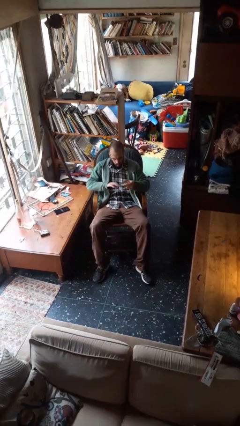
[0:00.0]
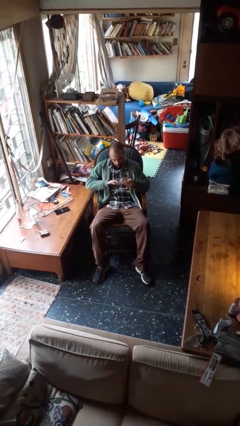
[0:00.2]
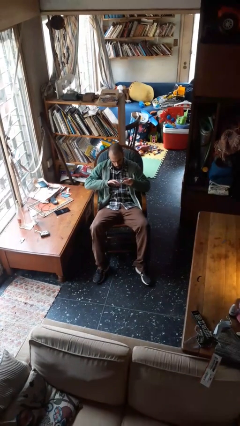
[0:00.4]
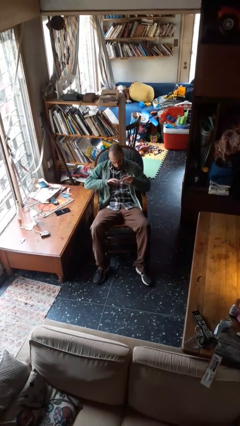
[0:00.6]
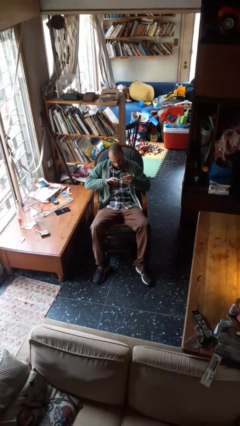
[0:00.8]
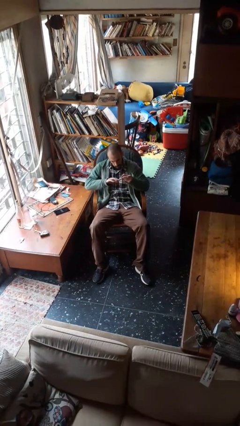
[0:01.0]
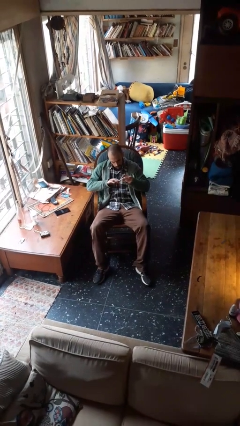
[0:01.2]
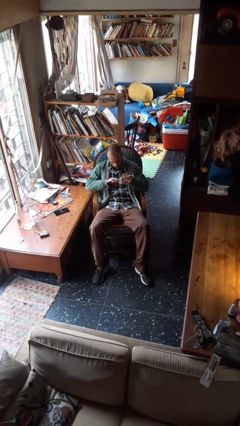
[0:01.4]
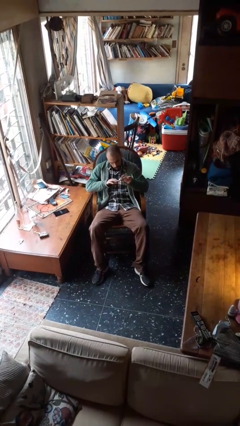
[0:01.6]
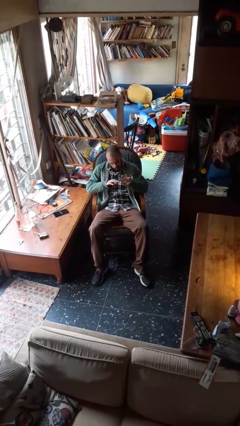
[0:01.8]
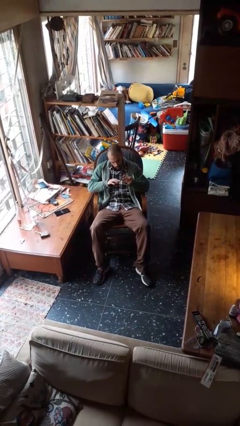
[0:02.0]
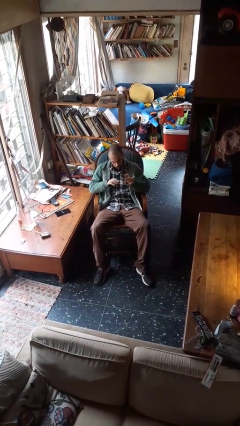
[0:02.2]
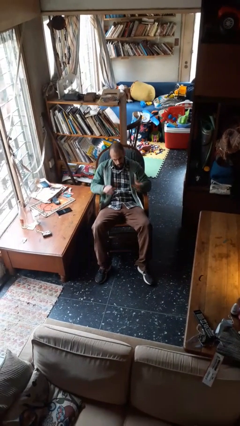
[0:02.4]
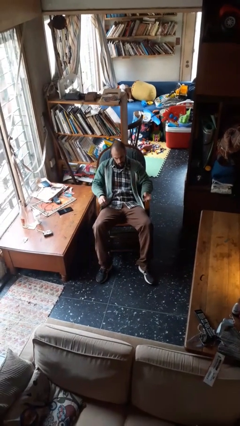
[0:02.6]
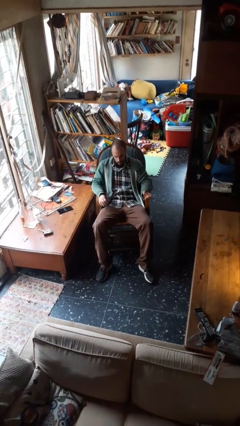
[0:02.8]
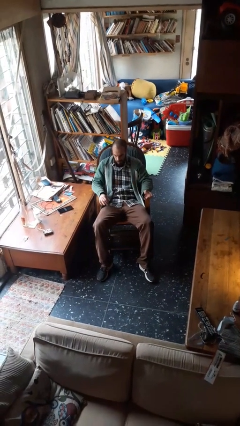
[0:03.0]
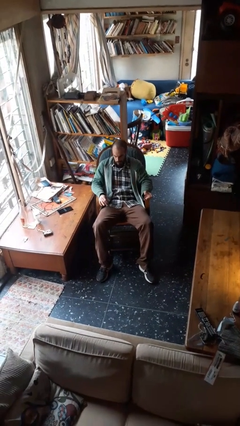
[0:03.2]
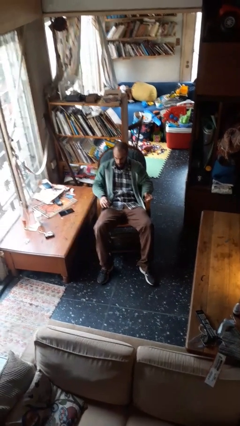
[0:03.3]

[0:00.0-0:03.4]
person clips fingernails

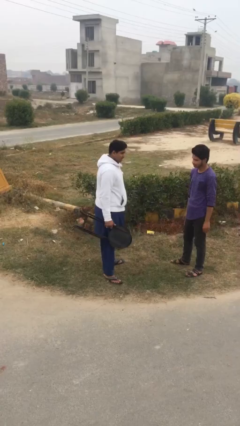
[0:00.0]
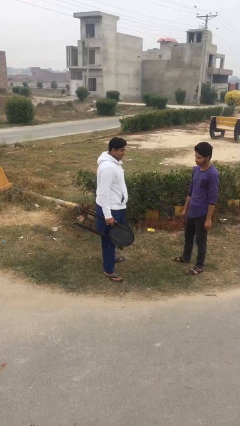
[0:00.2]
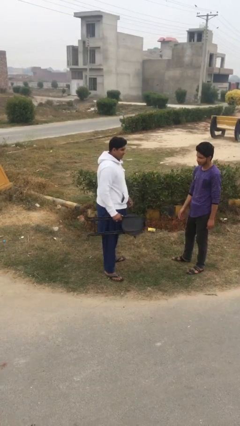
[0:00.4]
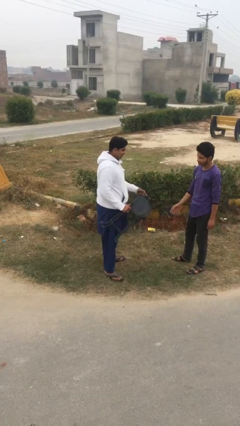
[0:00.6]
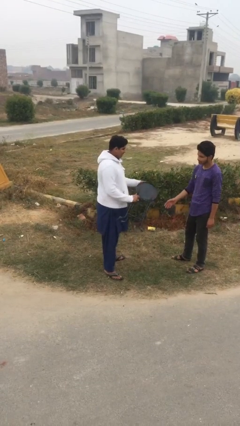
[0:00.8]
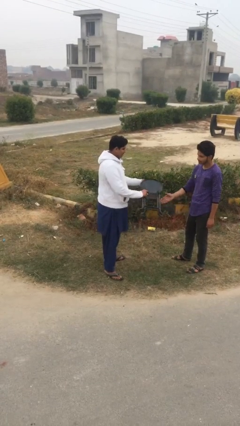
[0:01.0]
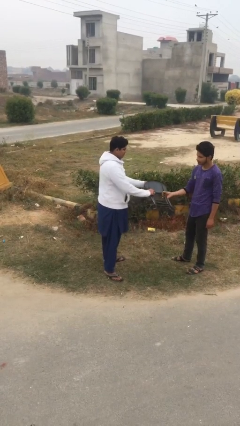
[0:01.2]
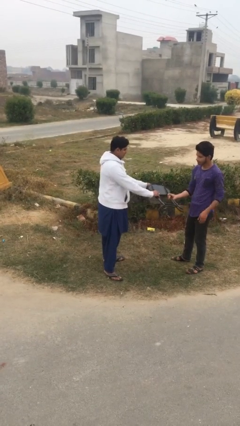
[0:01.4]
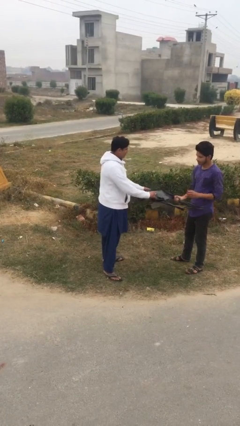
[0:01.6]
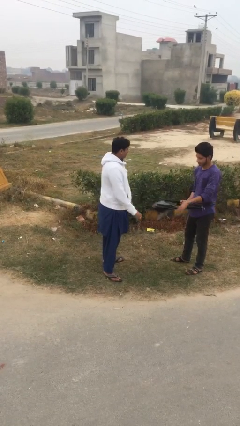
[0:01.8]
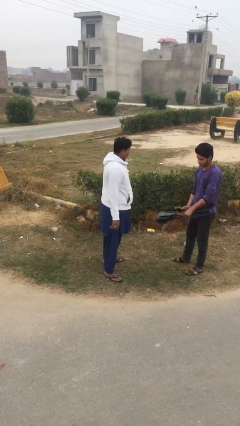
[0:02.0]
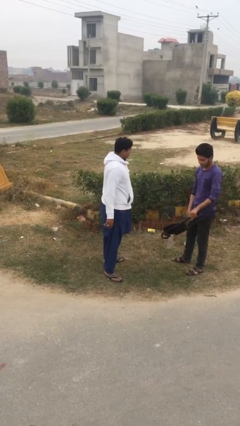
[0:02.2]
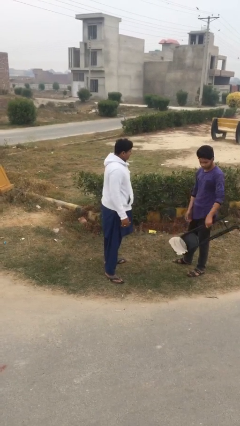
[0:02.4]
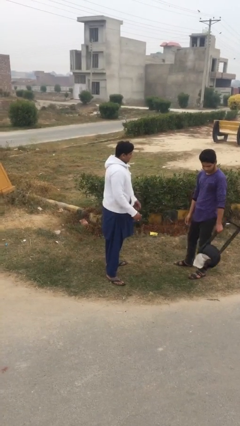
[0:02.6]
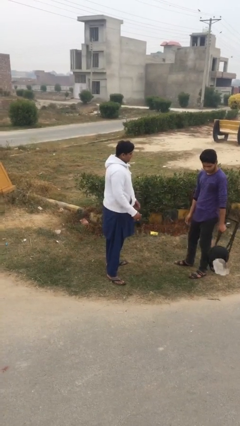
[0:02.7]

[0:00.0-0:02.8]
person transfers object to person

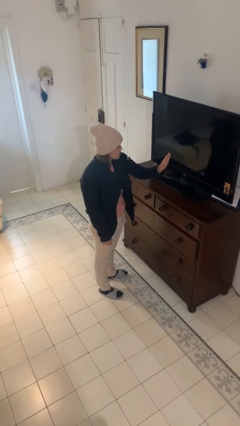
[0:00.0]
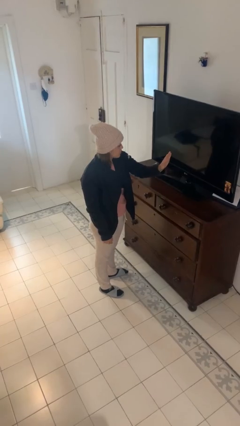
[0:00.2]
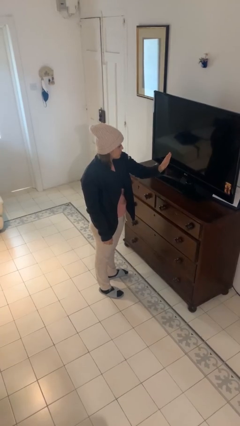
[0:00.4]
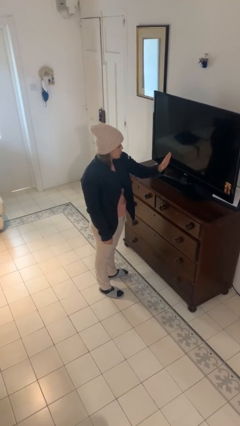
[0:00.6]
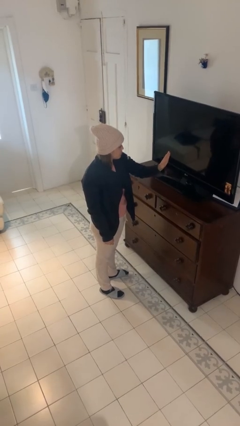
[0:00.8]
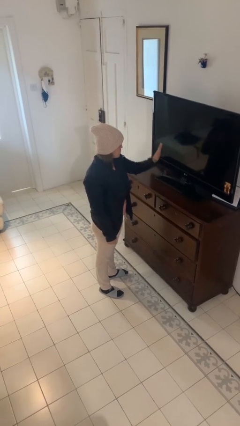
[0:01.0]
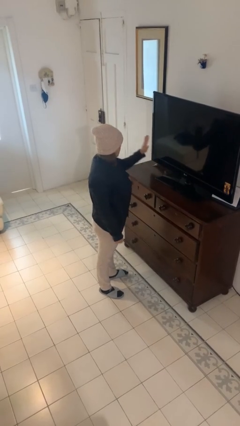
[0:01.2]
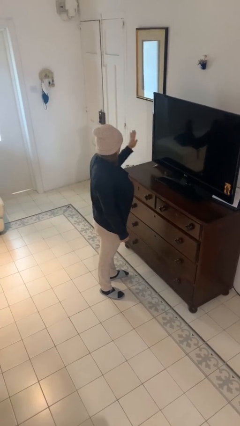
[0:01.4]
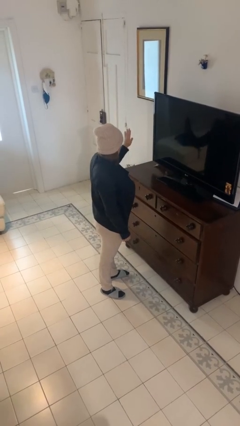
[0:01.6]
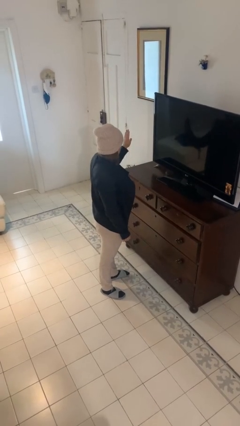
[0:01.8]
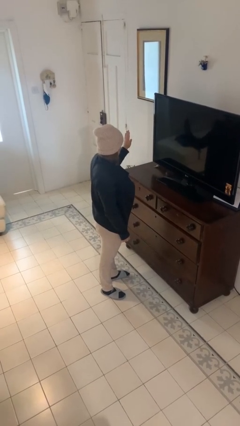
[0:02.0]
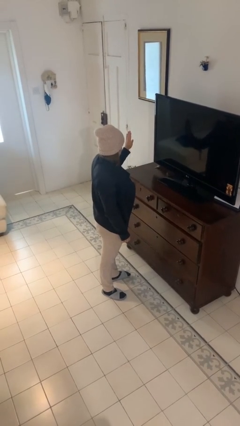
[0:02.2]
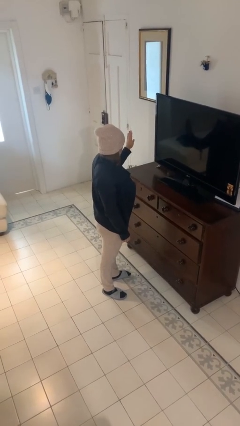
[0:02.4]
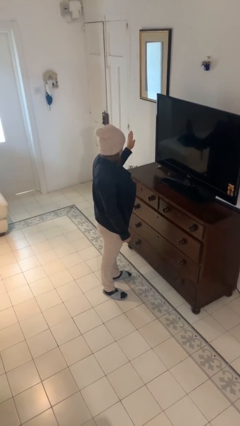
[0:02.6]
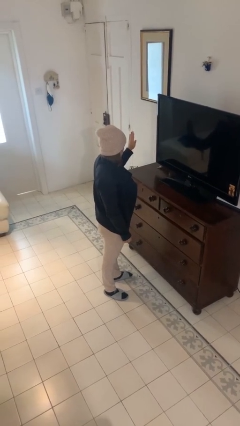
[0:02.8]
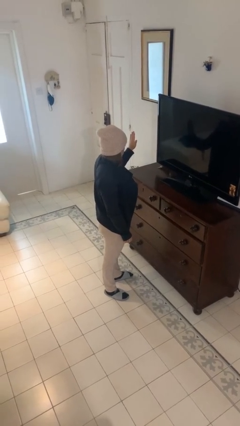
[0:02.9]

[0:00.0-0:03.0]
person gestures swipe right

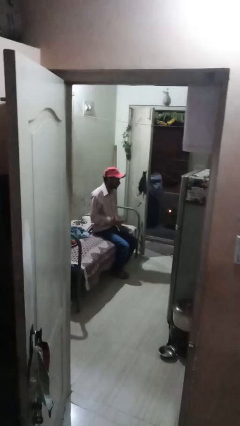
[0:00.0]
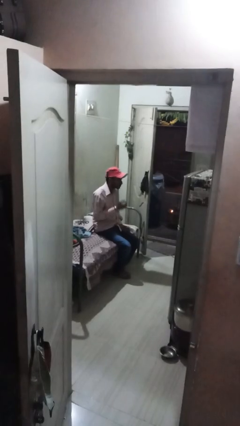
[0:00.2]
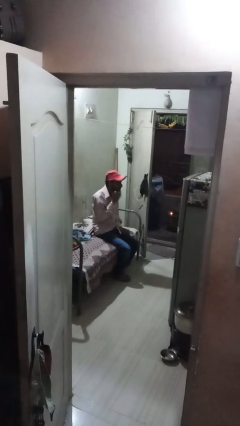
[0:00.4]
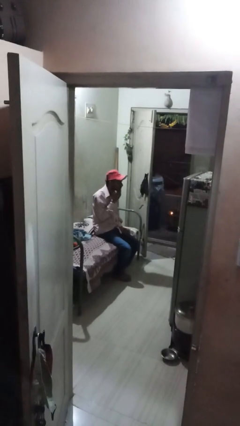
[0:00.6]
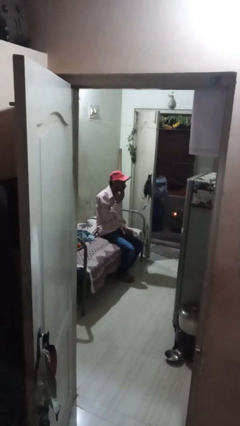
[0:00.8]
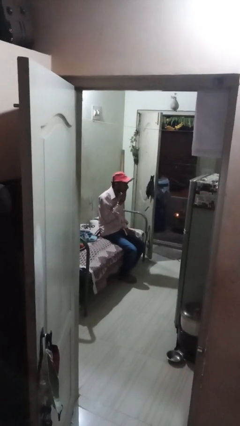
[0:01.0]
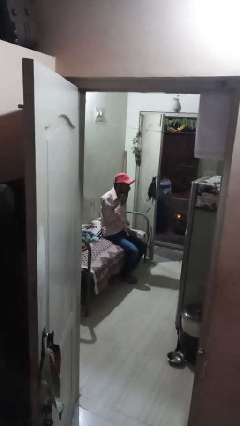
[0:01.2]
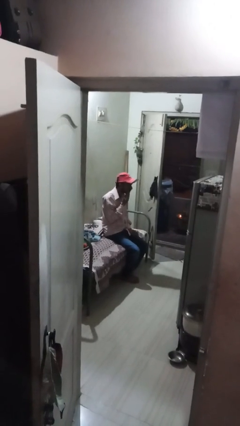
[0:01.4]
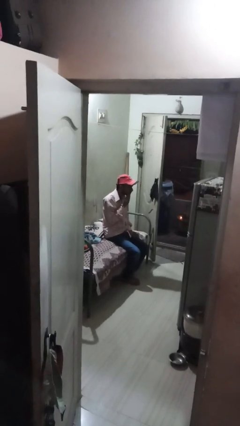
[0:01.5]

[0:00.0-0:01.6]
person strokes chin

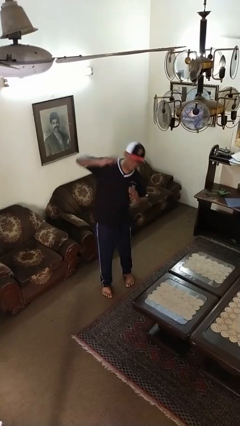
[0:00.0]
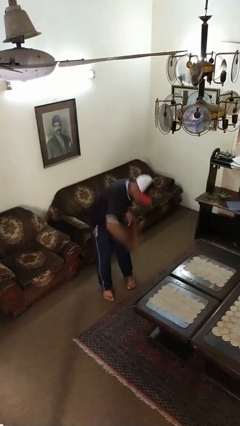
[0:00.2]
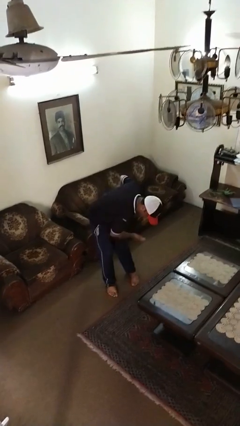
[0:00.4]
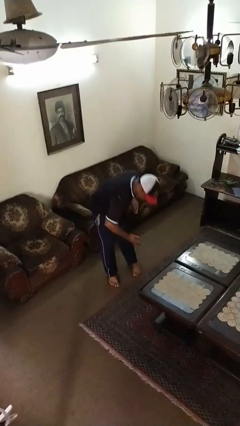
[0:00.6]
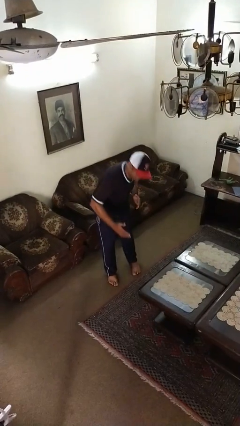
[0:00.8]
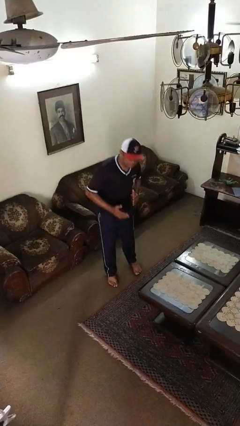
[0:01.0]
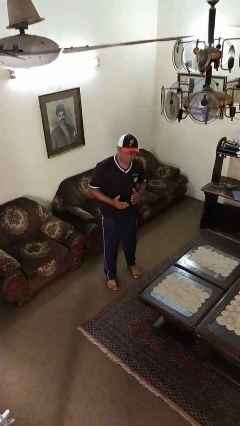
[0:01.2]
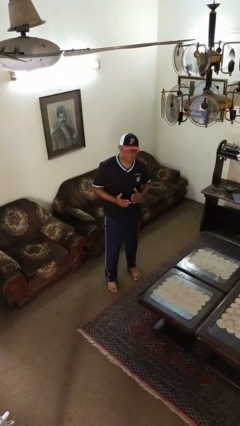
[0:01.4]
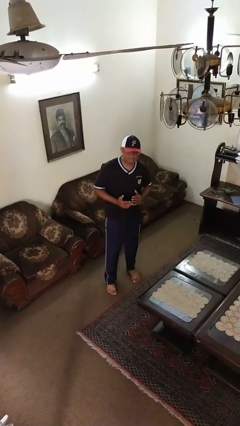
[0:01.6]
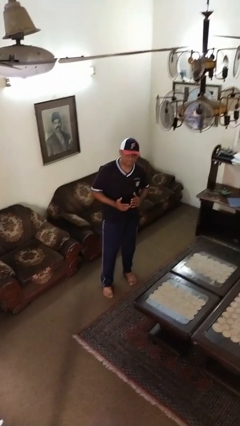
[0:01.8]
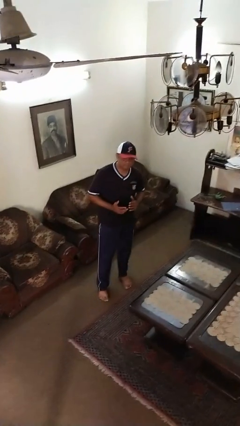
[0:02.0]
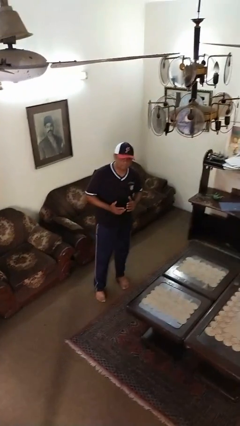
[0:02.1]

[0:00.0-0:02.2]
person karate chop

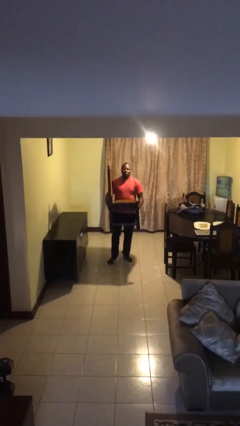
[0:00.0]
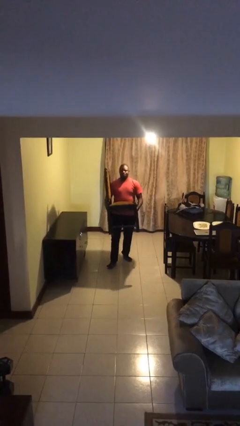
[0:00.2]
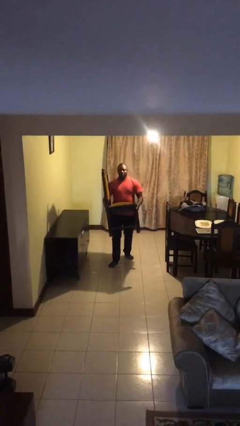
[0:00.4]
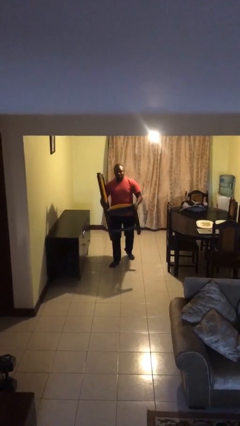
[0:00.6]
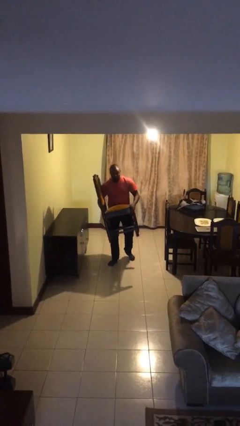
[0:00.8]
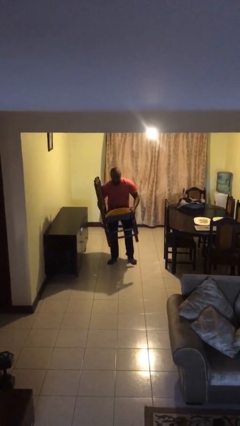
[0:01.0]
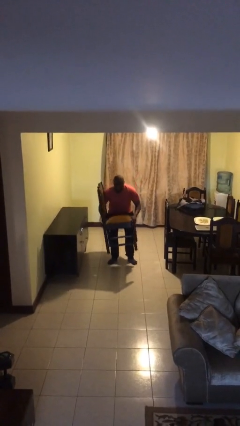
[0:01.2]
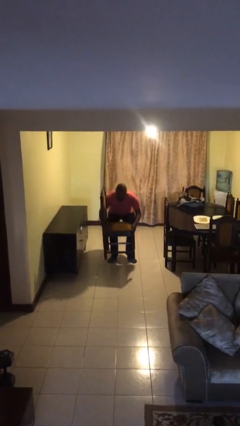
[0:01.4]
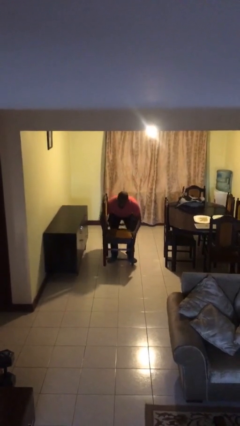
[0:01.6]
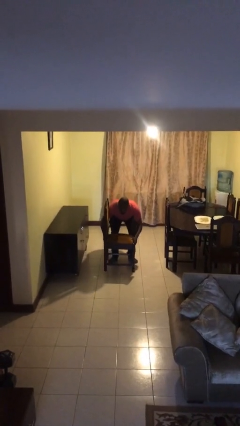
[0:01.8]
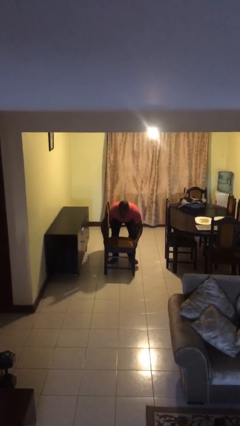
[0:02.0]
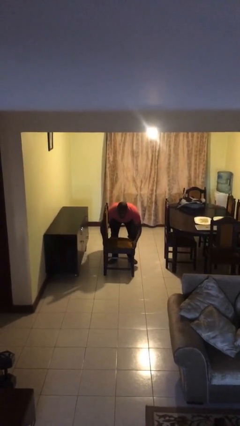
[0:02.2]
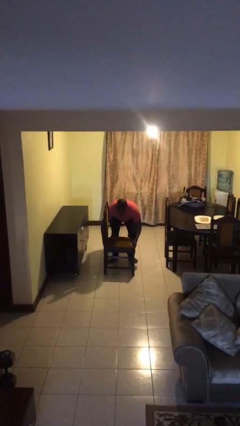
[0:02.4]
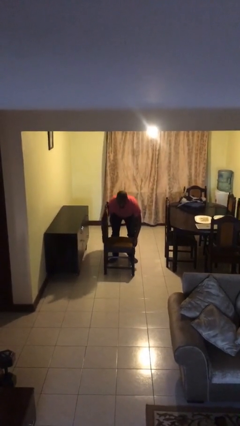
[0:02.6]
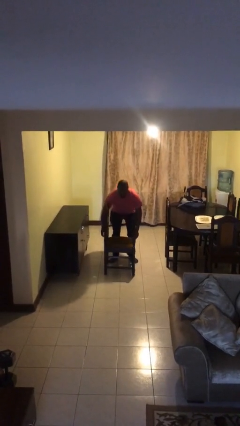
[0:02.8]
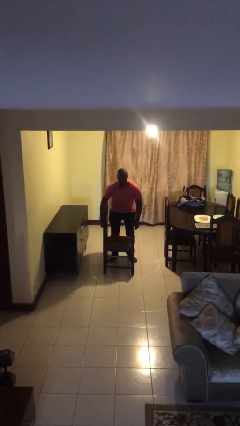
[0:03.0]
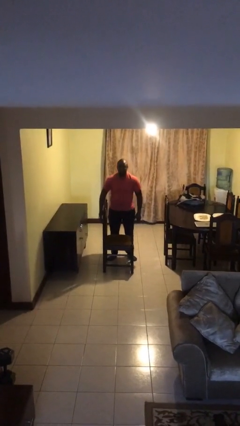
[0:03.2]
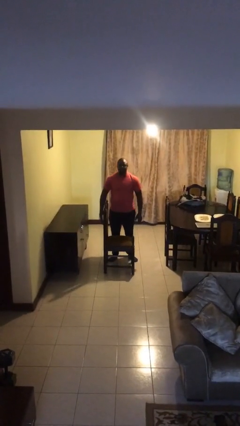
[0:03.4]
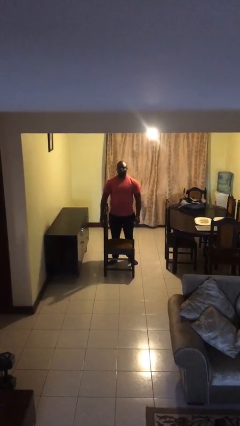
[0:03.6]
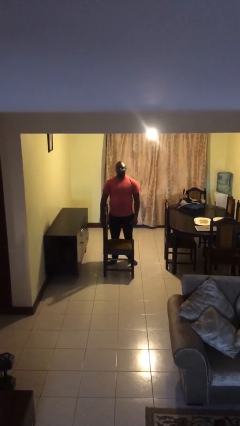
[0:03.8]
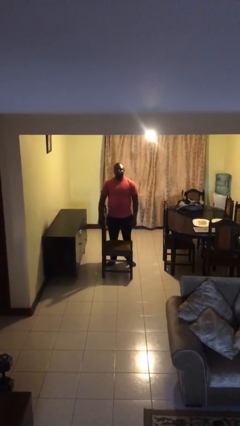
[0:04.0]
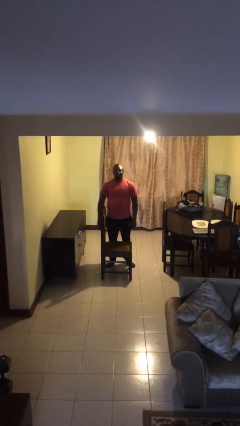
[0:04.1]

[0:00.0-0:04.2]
person puts down object on floor

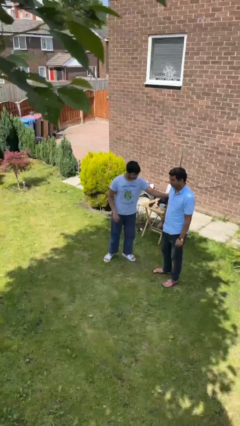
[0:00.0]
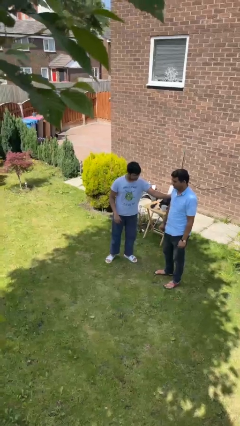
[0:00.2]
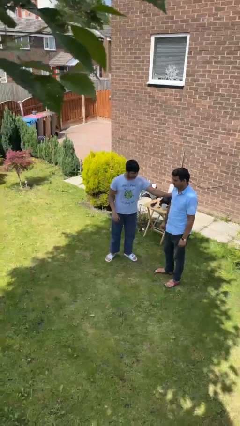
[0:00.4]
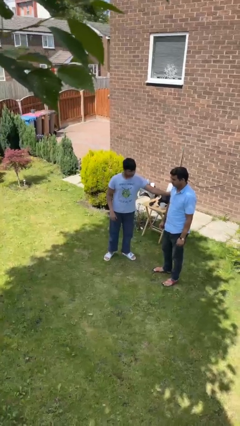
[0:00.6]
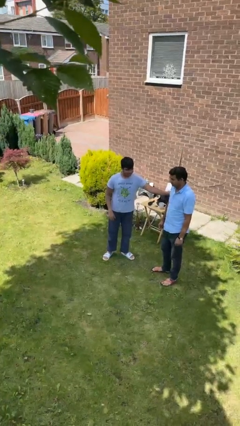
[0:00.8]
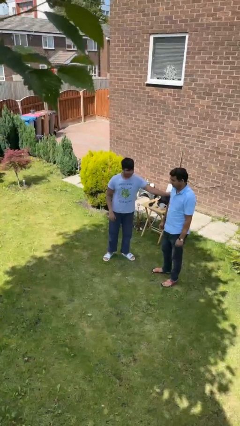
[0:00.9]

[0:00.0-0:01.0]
person grabs person by bicep
